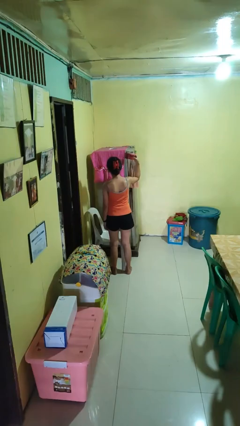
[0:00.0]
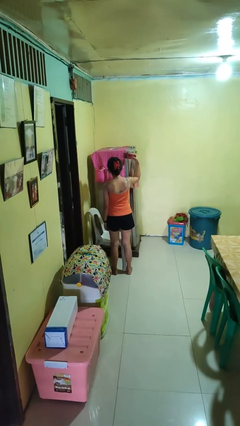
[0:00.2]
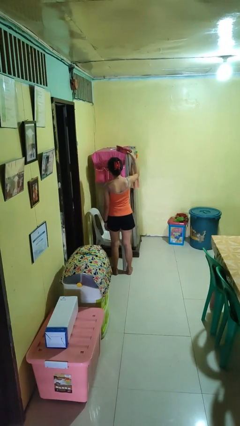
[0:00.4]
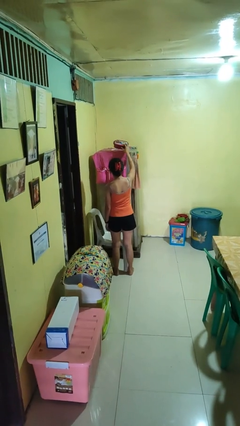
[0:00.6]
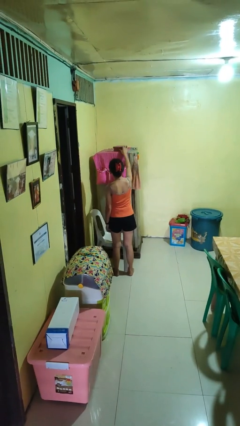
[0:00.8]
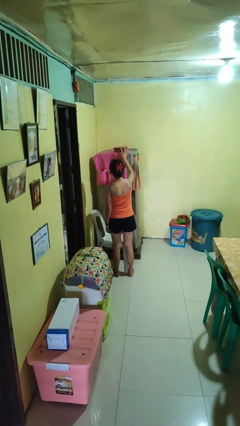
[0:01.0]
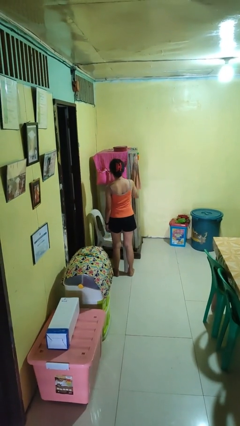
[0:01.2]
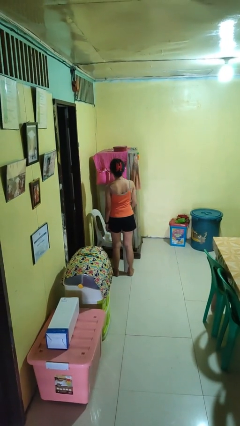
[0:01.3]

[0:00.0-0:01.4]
person puts down object on shelf

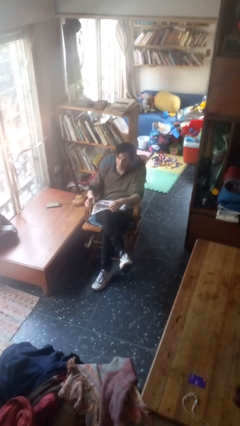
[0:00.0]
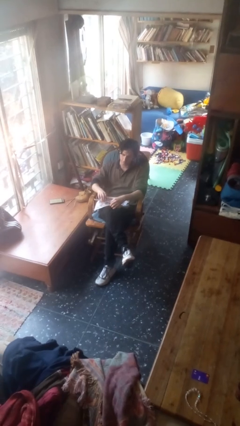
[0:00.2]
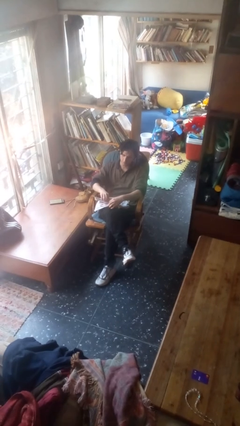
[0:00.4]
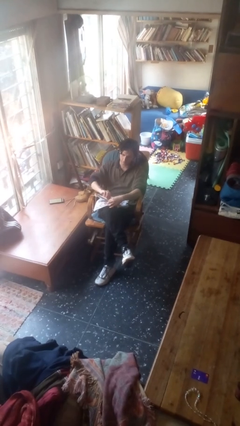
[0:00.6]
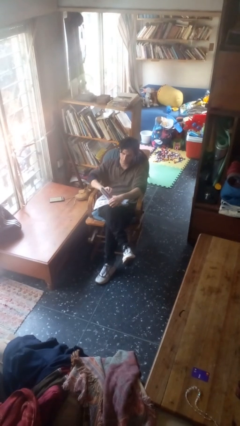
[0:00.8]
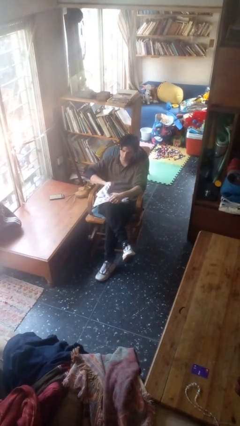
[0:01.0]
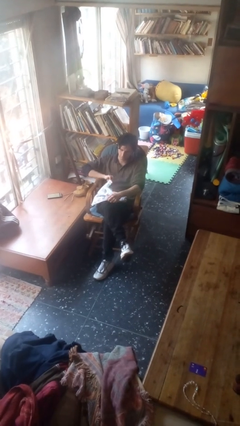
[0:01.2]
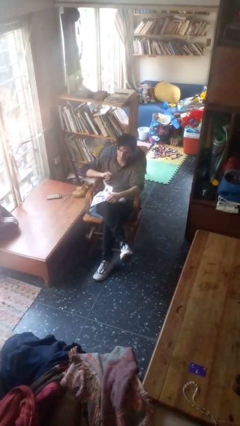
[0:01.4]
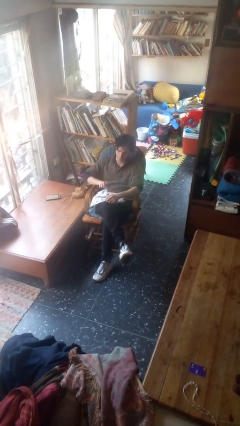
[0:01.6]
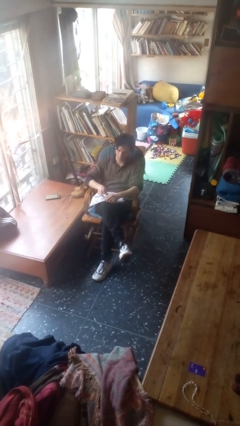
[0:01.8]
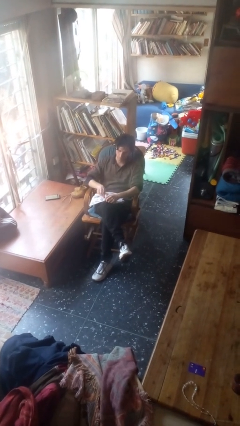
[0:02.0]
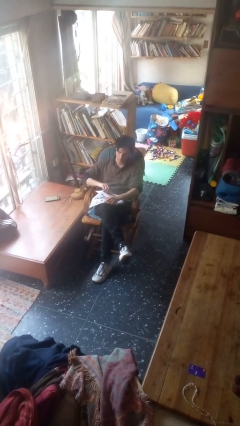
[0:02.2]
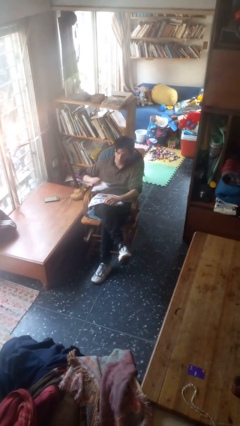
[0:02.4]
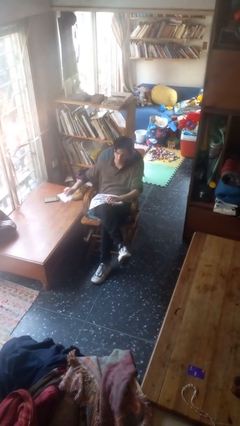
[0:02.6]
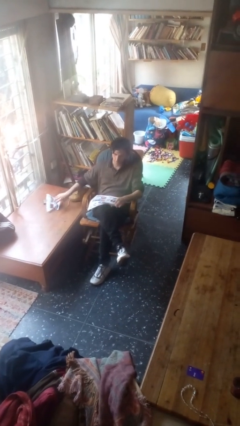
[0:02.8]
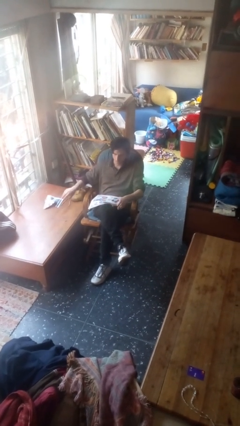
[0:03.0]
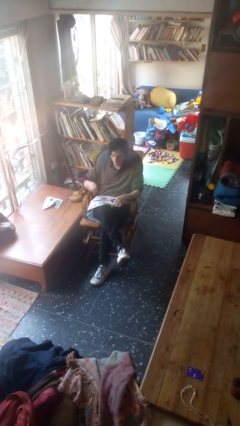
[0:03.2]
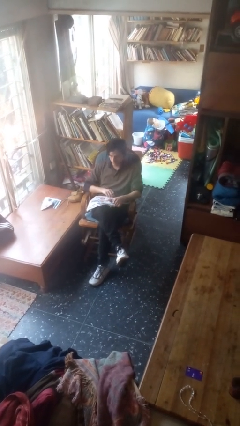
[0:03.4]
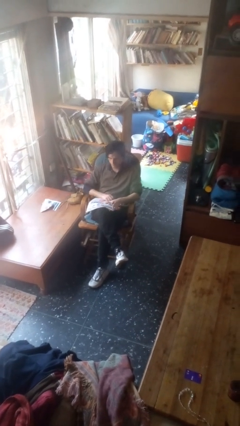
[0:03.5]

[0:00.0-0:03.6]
person tears paper

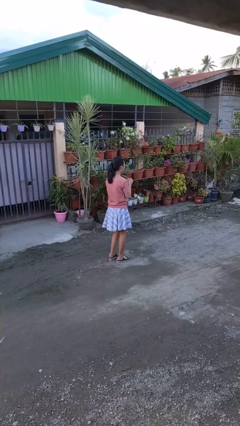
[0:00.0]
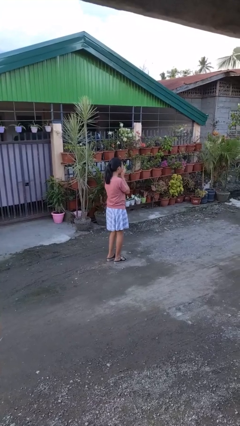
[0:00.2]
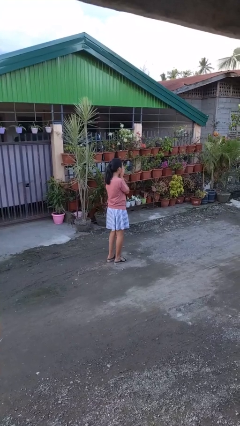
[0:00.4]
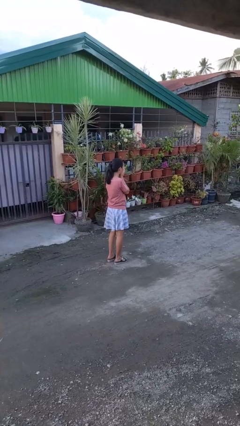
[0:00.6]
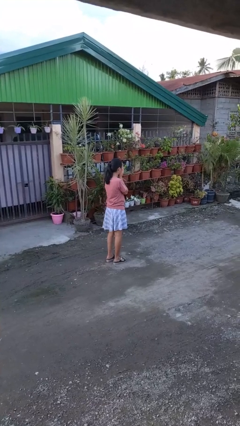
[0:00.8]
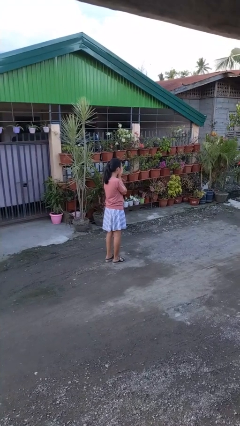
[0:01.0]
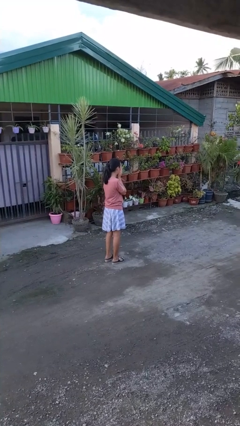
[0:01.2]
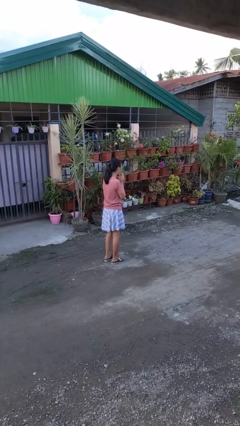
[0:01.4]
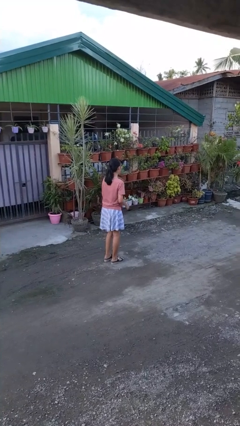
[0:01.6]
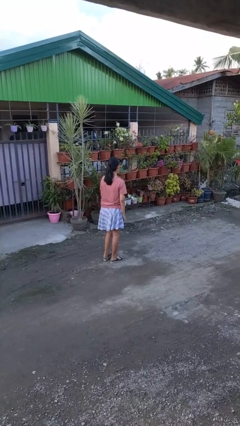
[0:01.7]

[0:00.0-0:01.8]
person blows into hands

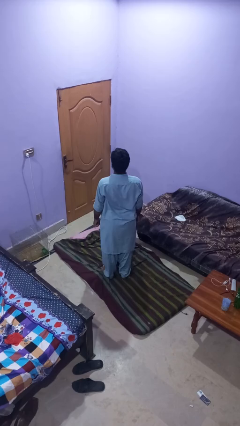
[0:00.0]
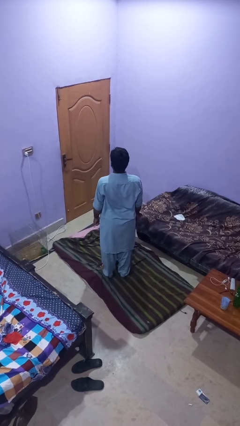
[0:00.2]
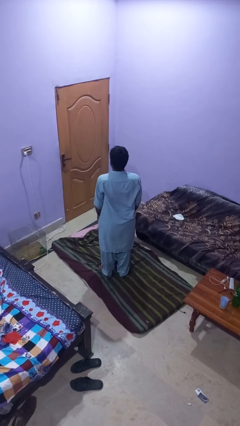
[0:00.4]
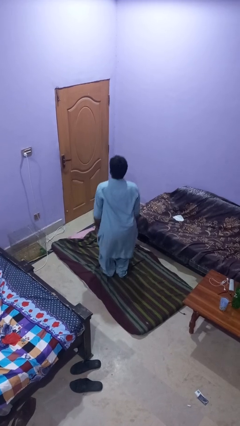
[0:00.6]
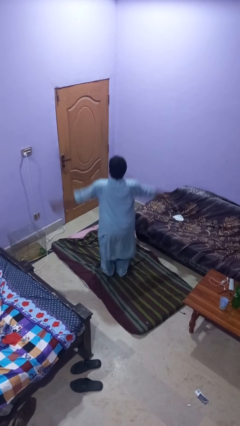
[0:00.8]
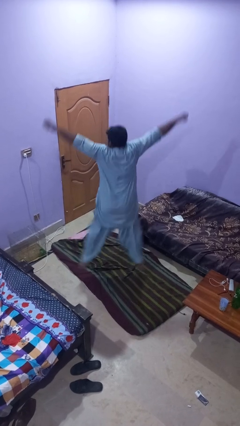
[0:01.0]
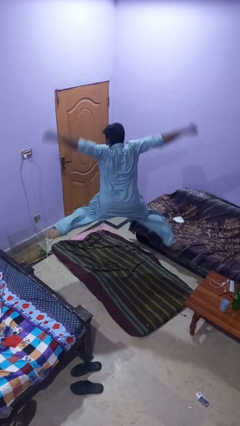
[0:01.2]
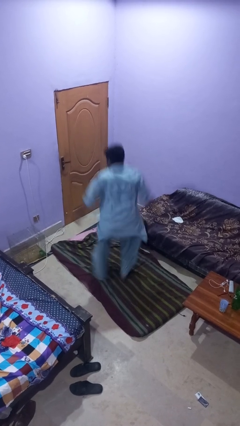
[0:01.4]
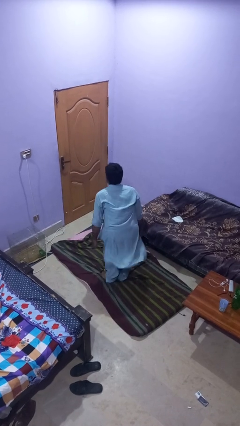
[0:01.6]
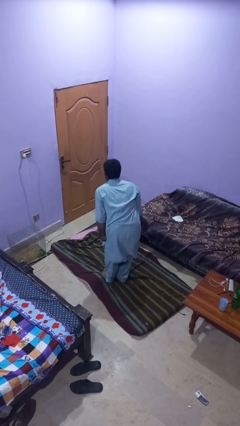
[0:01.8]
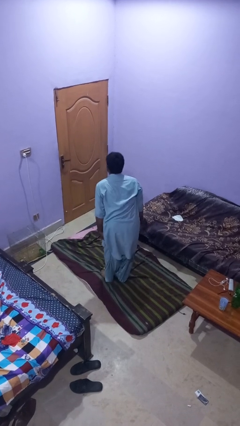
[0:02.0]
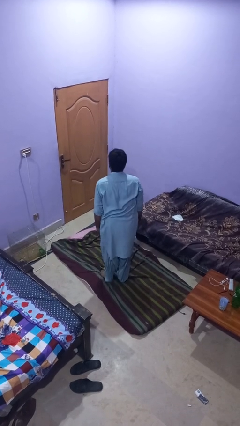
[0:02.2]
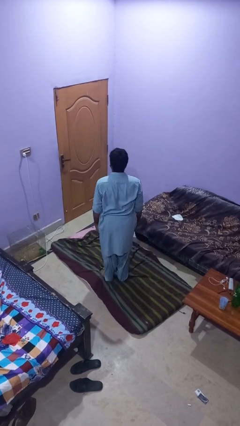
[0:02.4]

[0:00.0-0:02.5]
person exercises with jumping jacks

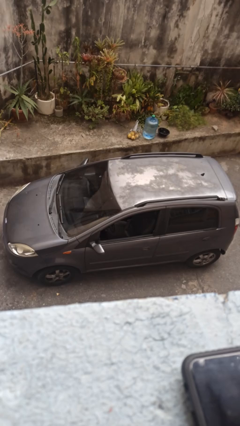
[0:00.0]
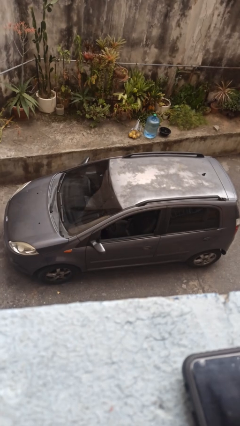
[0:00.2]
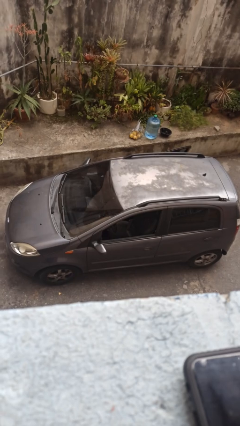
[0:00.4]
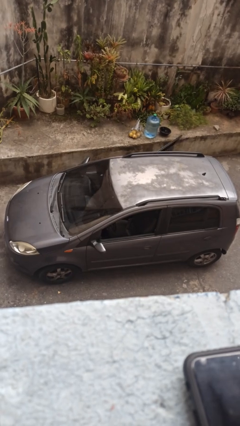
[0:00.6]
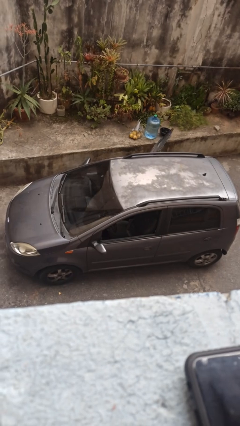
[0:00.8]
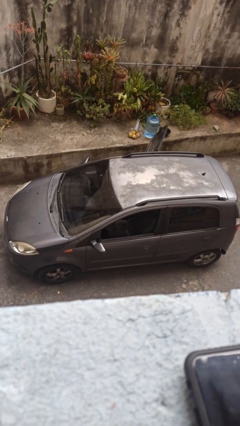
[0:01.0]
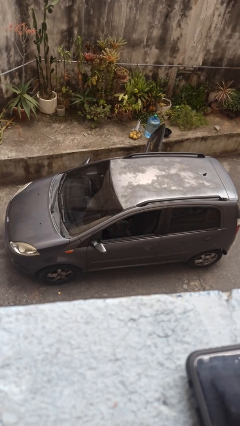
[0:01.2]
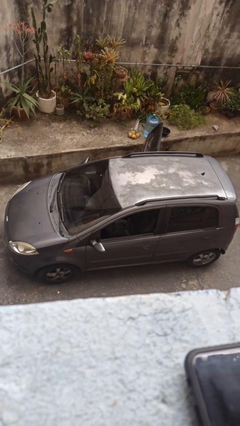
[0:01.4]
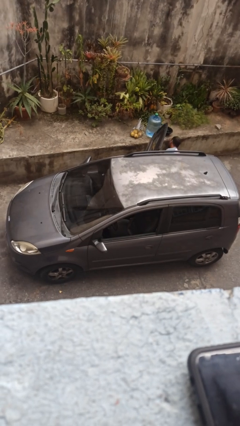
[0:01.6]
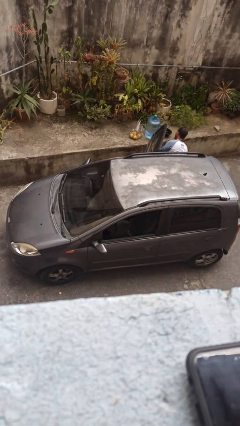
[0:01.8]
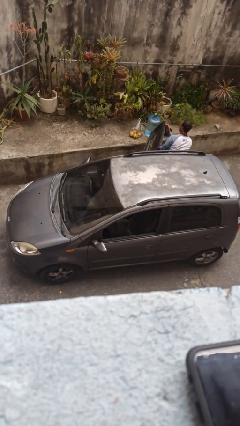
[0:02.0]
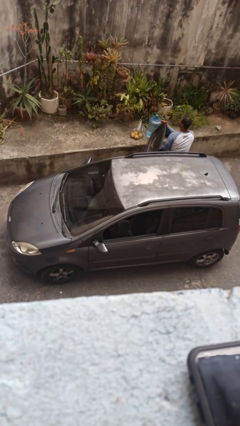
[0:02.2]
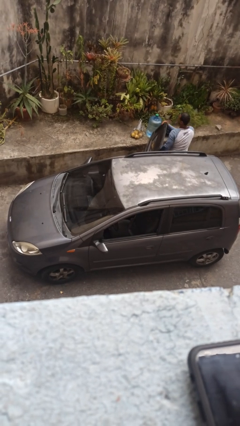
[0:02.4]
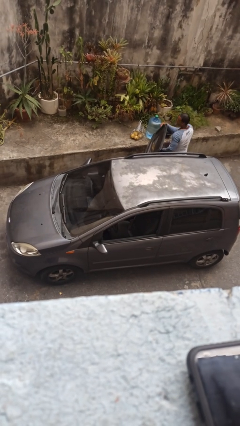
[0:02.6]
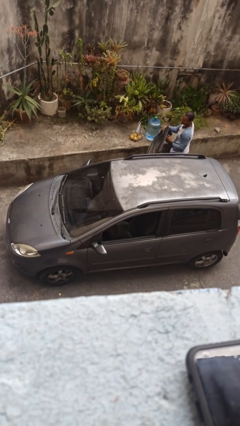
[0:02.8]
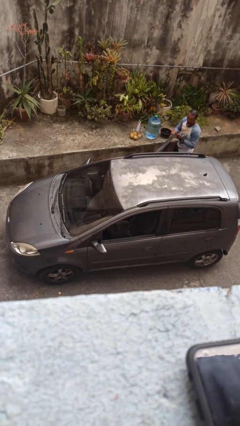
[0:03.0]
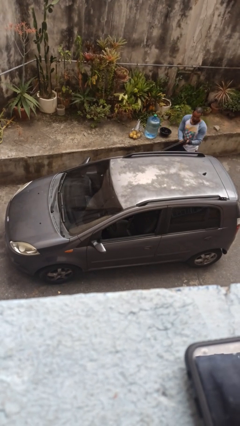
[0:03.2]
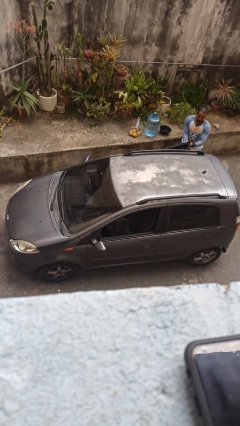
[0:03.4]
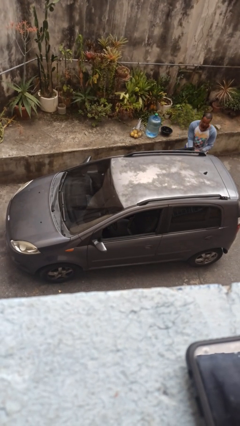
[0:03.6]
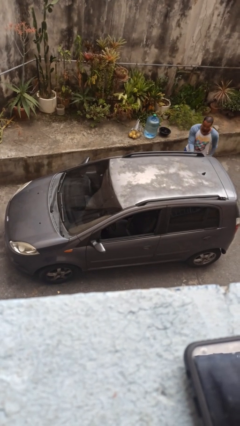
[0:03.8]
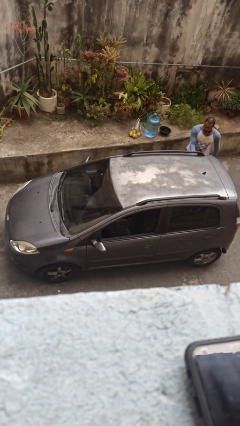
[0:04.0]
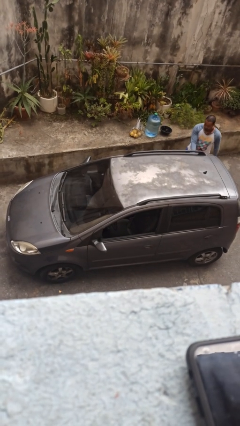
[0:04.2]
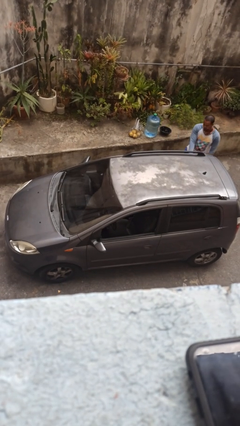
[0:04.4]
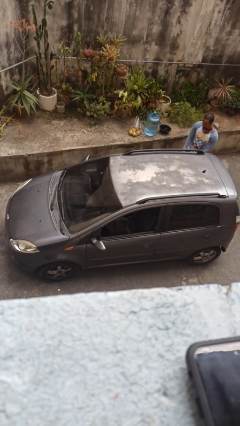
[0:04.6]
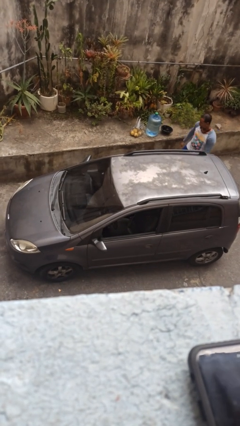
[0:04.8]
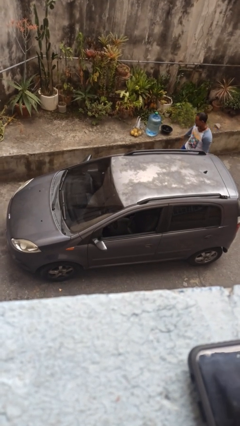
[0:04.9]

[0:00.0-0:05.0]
car drops off person

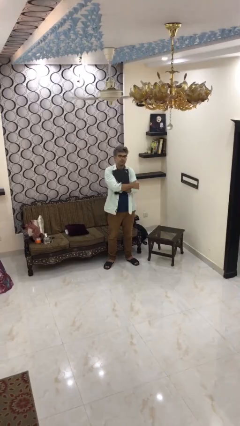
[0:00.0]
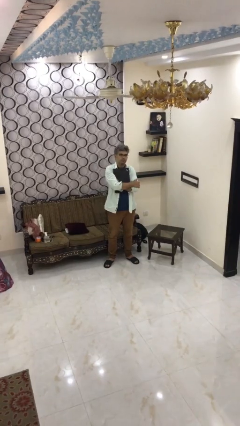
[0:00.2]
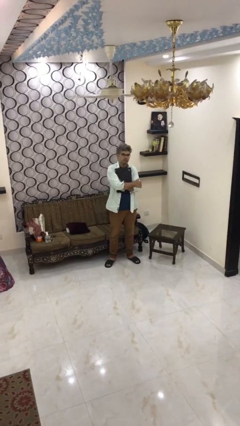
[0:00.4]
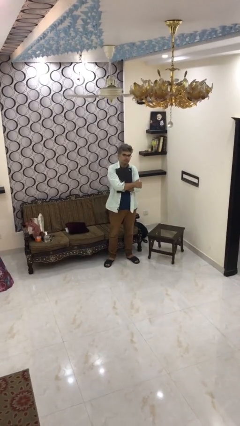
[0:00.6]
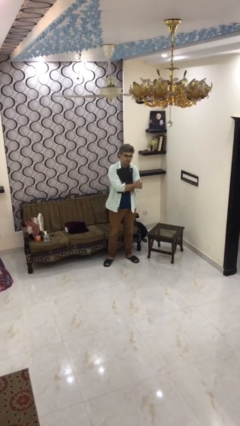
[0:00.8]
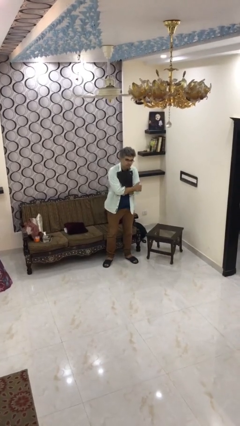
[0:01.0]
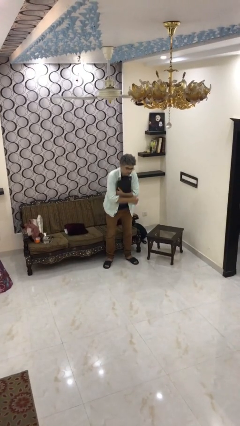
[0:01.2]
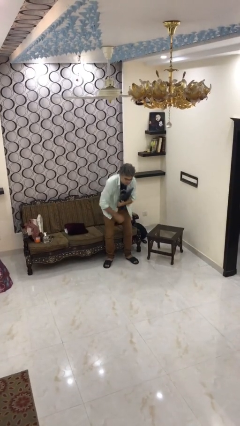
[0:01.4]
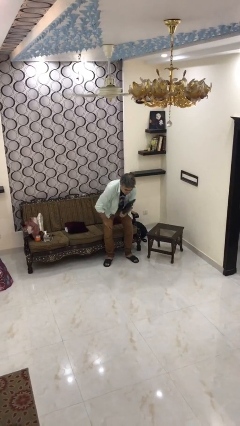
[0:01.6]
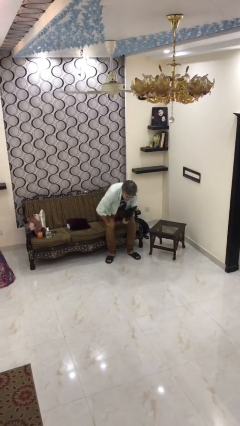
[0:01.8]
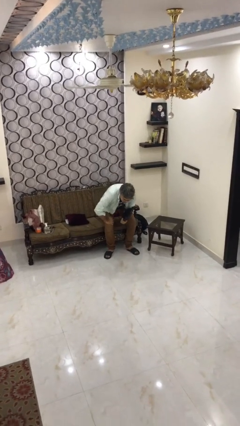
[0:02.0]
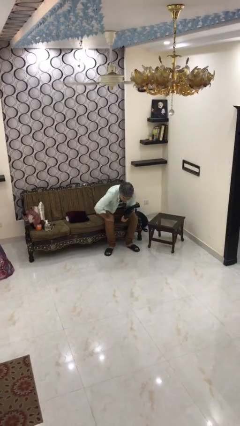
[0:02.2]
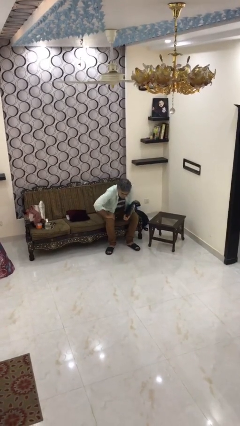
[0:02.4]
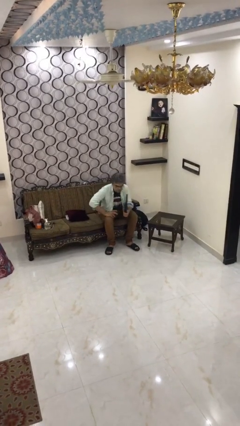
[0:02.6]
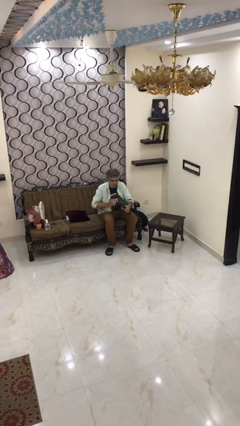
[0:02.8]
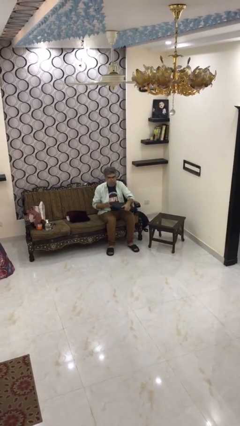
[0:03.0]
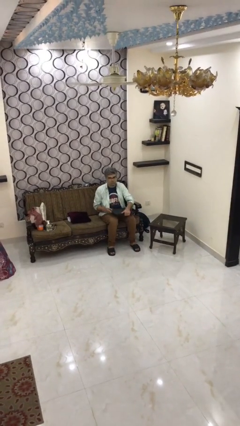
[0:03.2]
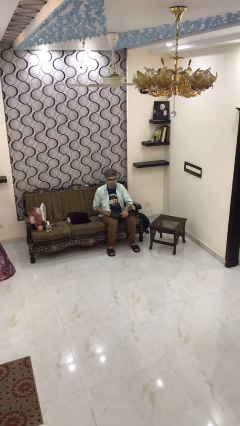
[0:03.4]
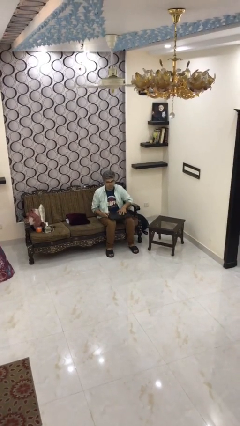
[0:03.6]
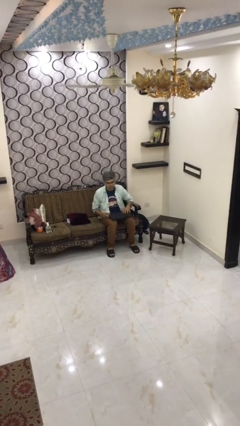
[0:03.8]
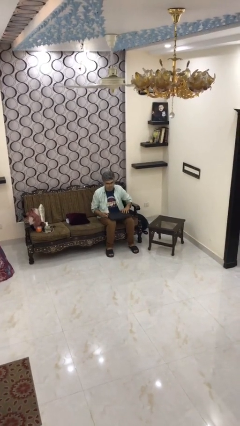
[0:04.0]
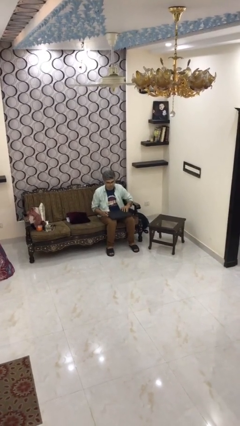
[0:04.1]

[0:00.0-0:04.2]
person sits down
